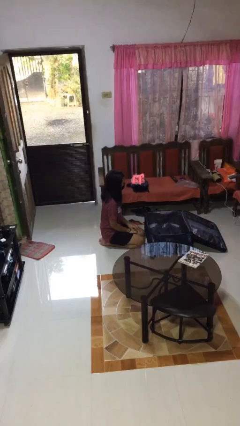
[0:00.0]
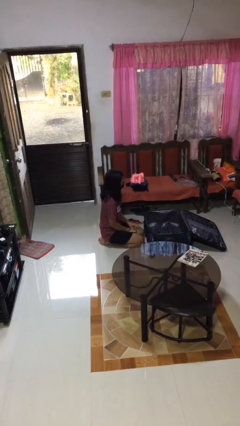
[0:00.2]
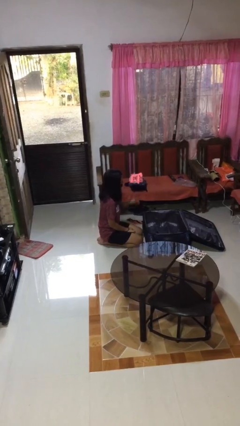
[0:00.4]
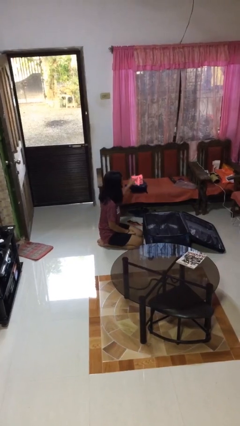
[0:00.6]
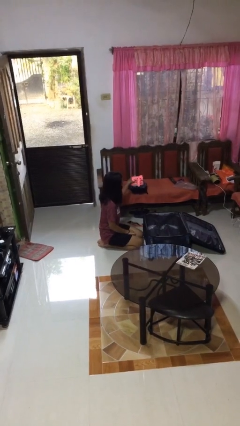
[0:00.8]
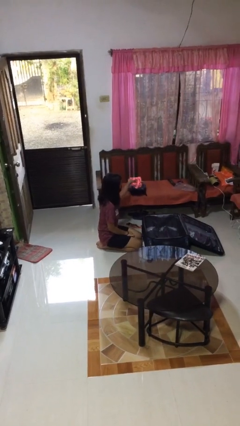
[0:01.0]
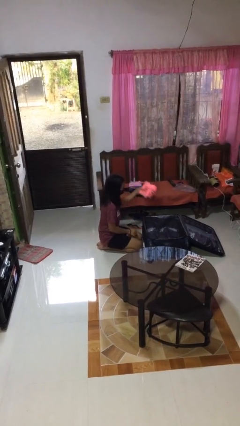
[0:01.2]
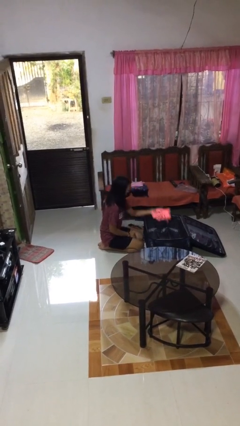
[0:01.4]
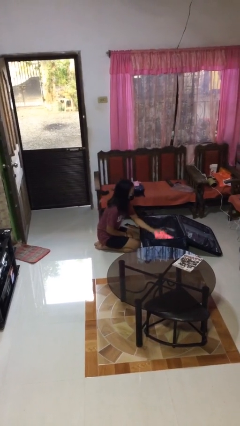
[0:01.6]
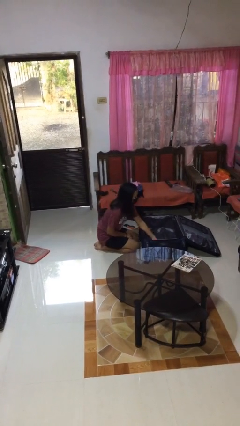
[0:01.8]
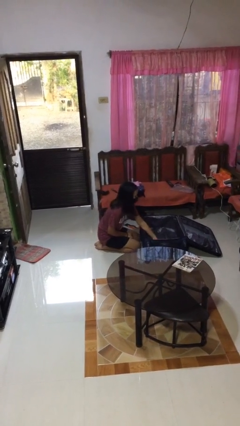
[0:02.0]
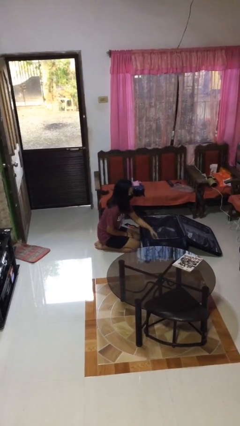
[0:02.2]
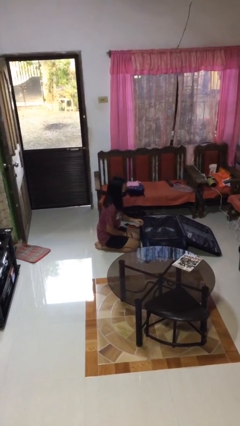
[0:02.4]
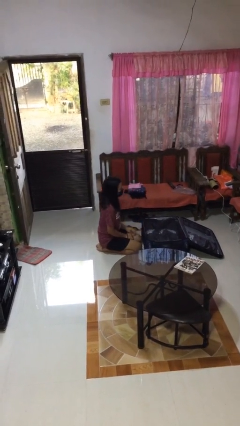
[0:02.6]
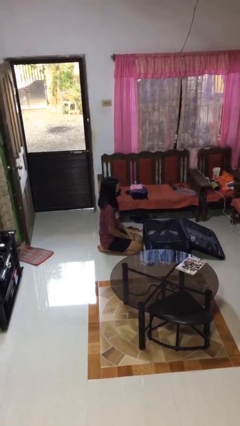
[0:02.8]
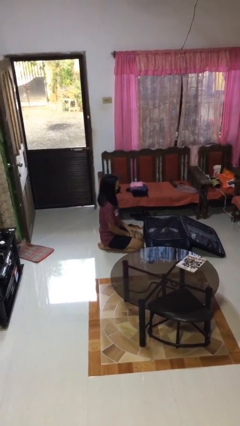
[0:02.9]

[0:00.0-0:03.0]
person loads clothes into suitcase

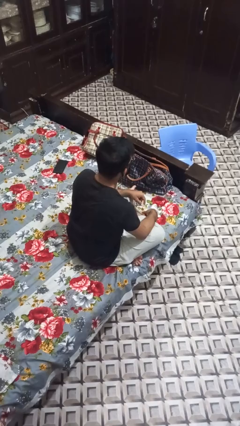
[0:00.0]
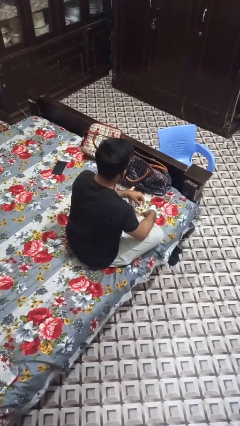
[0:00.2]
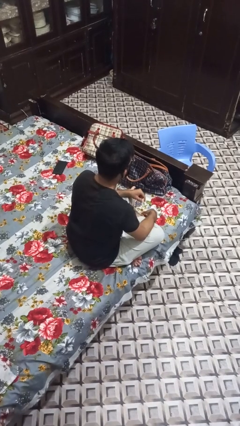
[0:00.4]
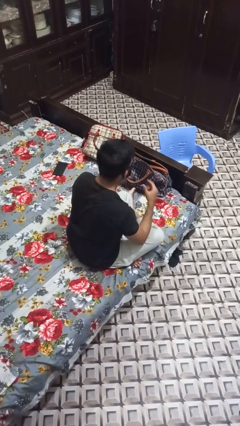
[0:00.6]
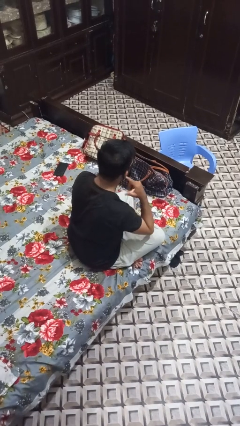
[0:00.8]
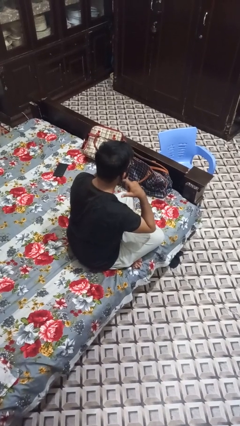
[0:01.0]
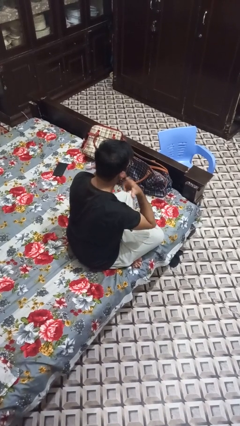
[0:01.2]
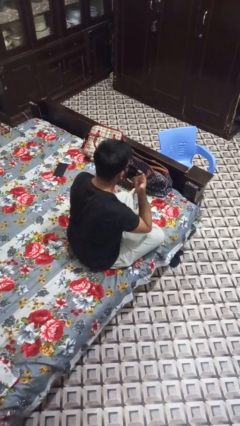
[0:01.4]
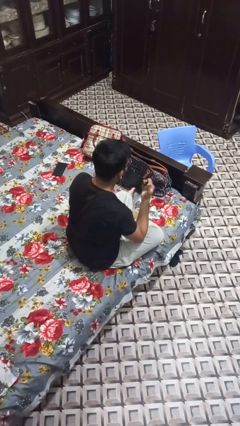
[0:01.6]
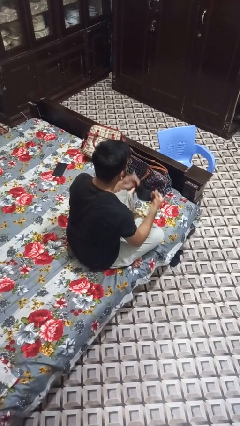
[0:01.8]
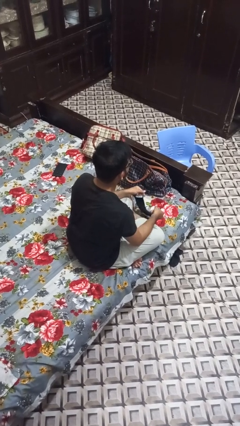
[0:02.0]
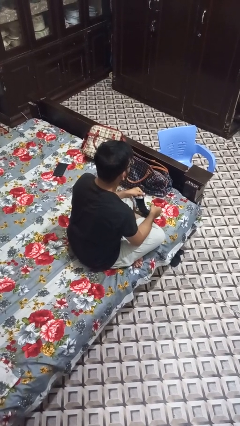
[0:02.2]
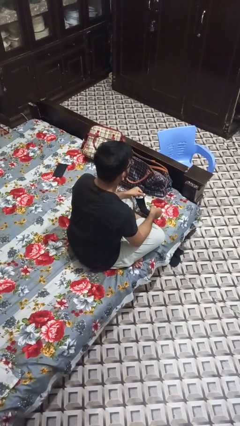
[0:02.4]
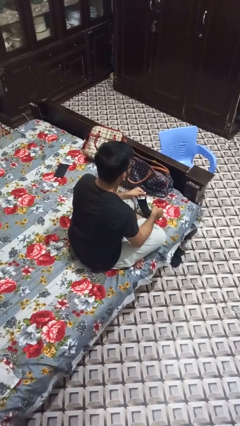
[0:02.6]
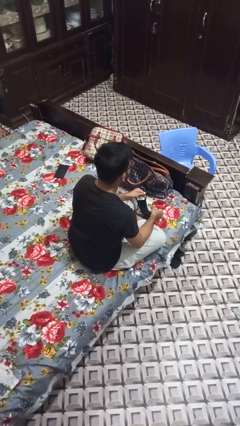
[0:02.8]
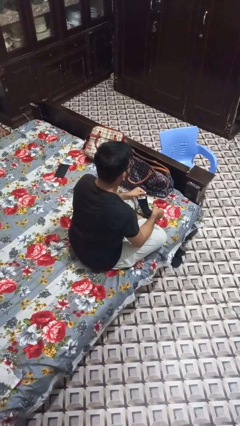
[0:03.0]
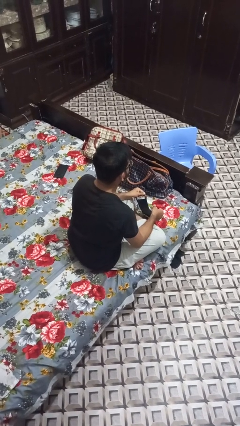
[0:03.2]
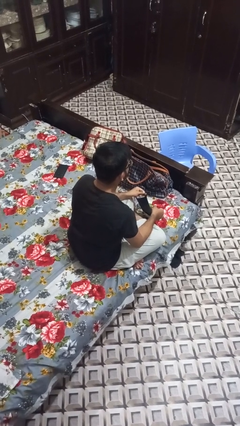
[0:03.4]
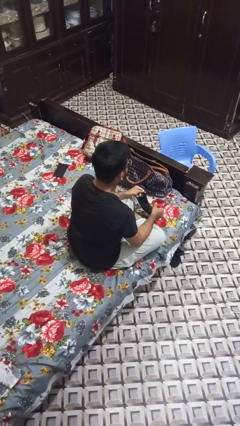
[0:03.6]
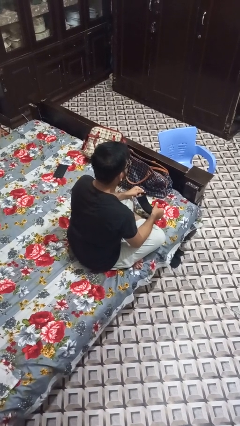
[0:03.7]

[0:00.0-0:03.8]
person takes off facemask

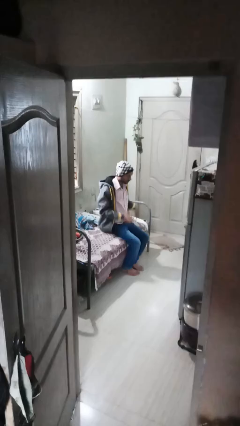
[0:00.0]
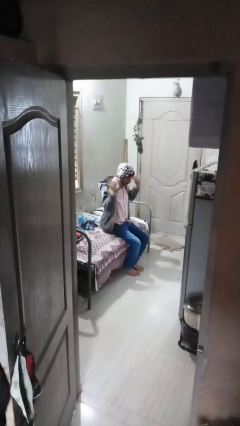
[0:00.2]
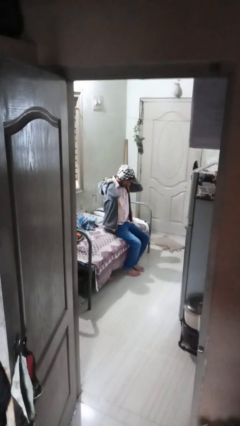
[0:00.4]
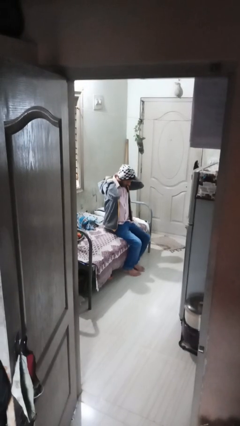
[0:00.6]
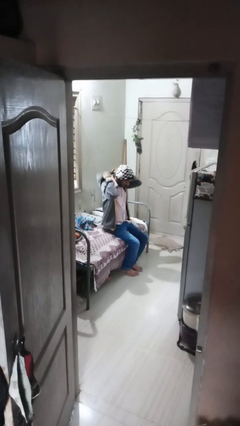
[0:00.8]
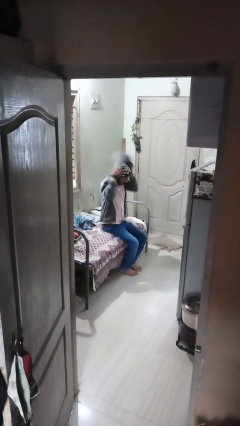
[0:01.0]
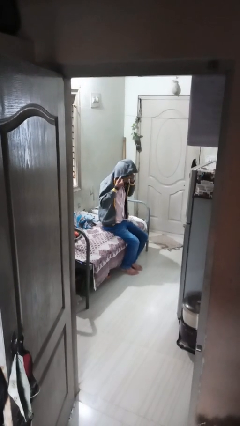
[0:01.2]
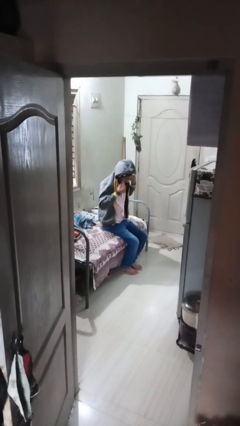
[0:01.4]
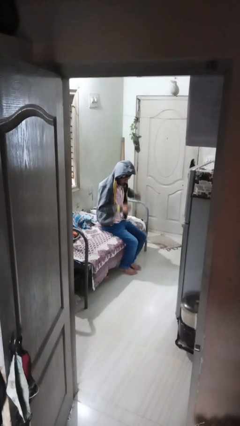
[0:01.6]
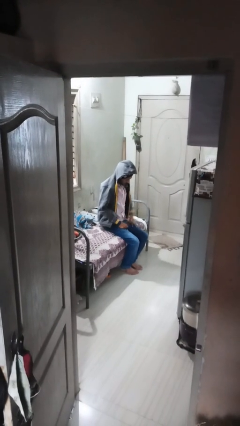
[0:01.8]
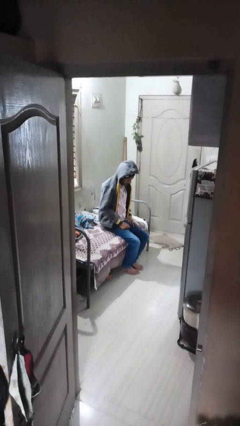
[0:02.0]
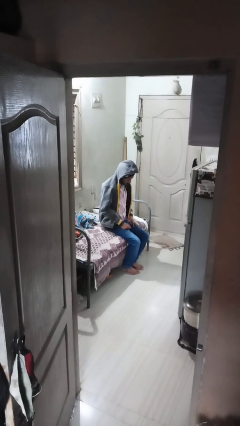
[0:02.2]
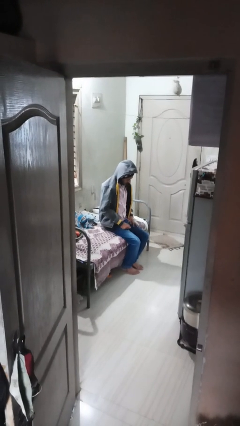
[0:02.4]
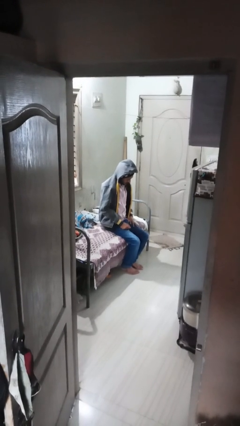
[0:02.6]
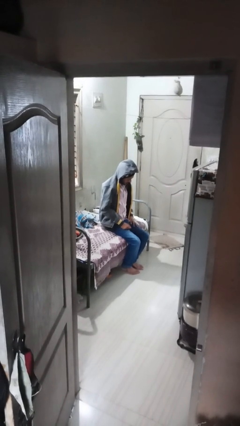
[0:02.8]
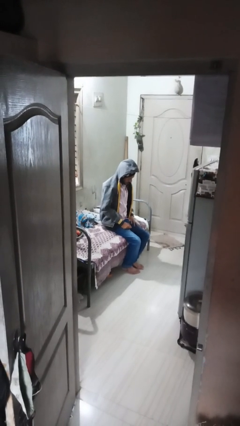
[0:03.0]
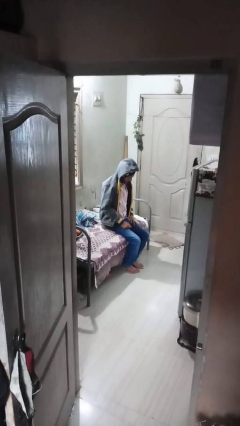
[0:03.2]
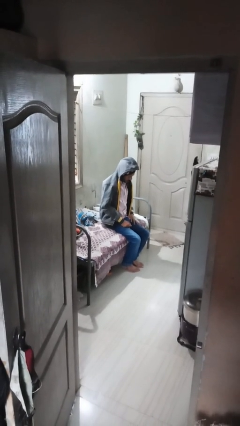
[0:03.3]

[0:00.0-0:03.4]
person puts on hoodie

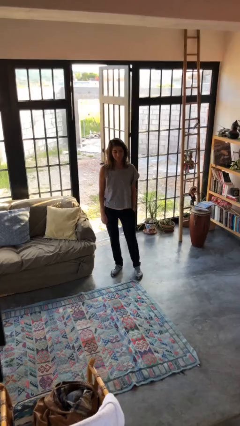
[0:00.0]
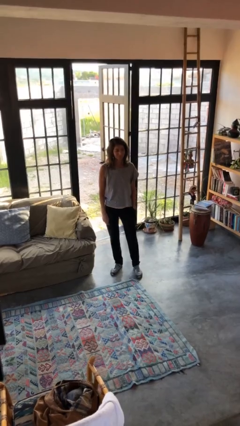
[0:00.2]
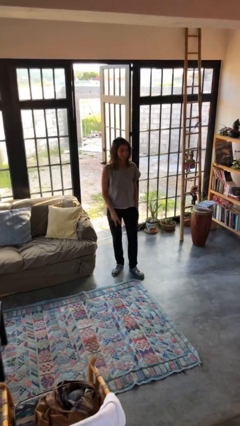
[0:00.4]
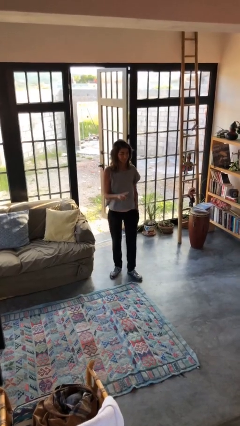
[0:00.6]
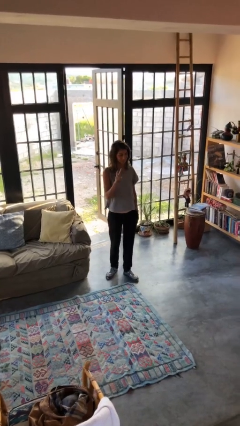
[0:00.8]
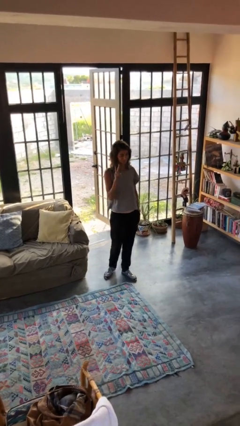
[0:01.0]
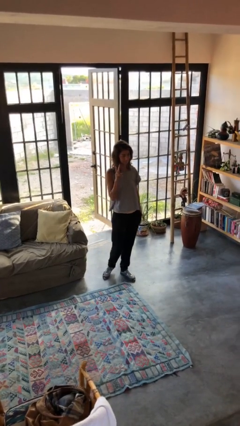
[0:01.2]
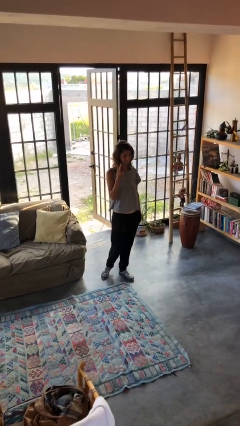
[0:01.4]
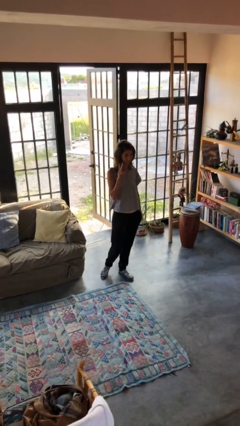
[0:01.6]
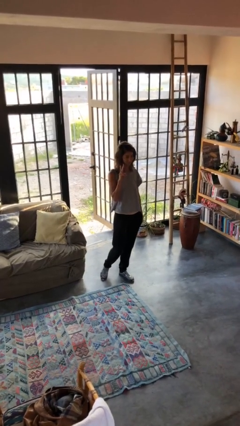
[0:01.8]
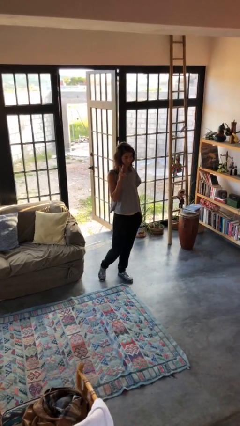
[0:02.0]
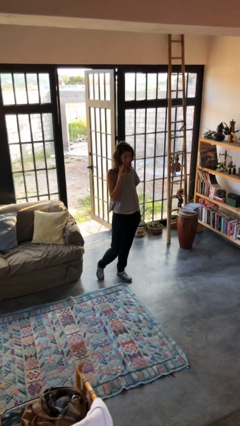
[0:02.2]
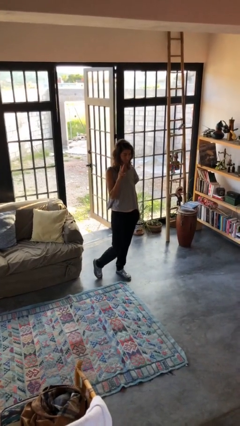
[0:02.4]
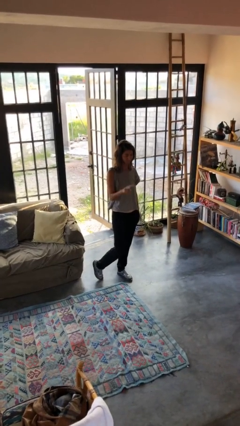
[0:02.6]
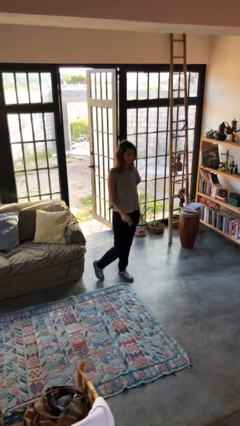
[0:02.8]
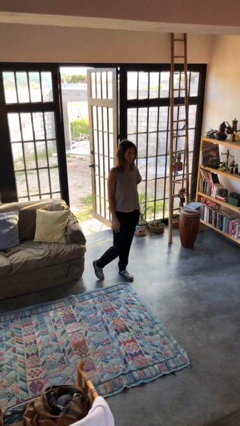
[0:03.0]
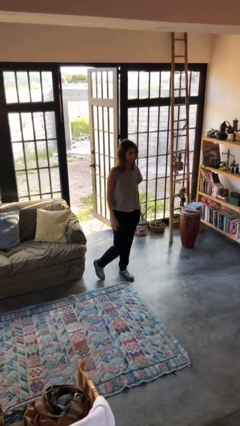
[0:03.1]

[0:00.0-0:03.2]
person gestures peace

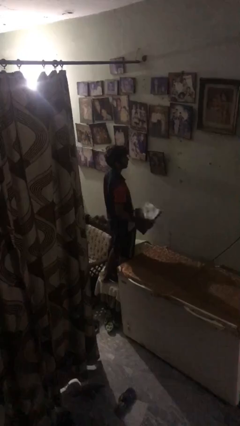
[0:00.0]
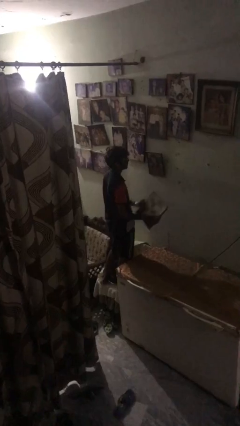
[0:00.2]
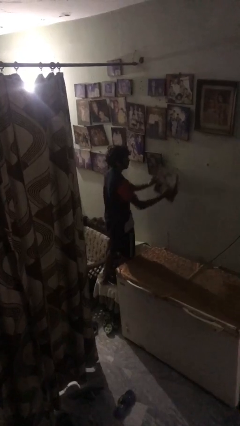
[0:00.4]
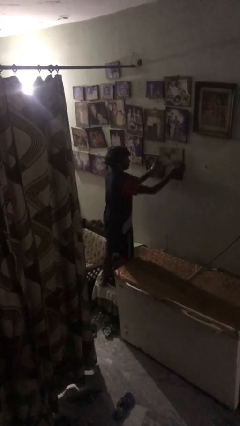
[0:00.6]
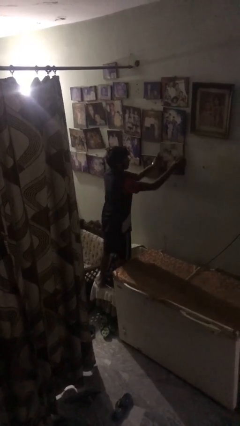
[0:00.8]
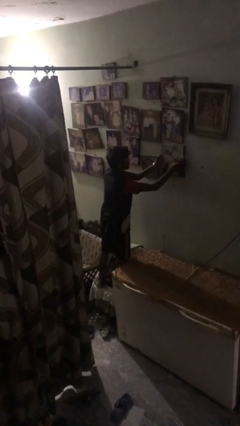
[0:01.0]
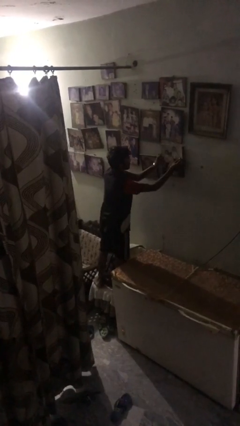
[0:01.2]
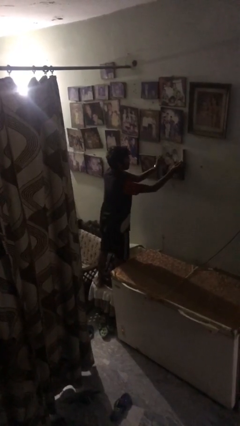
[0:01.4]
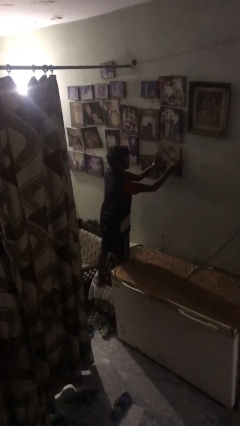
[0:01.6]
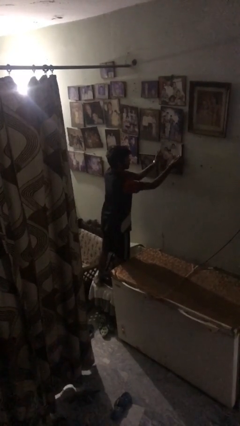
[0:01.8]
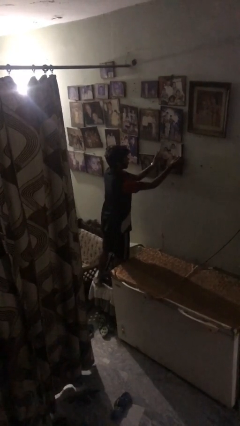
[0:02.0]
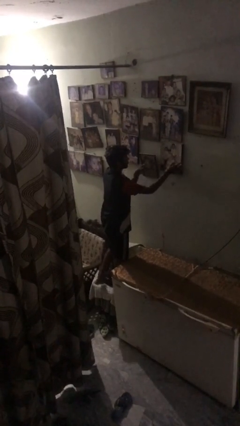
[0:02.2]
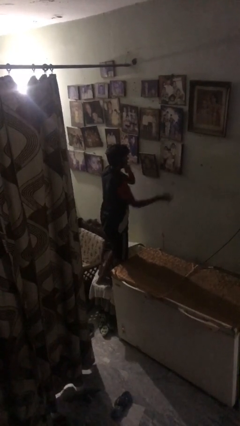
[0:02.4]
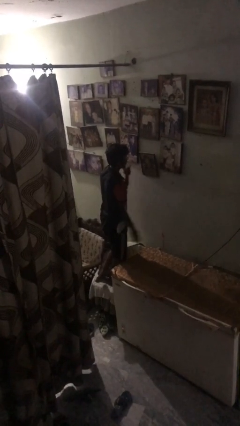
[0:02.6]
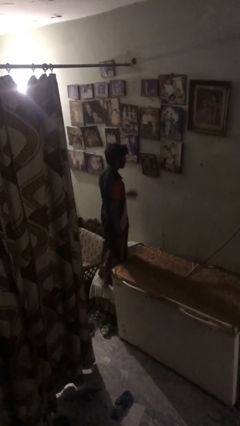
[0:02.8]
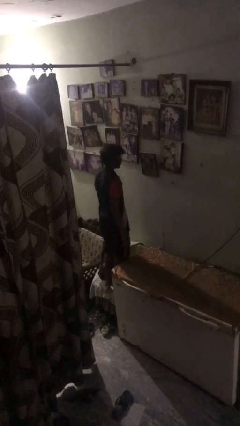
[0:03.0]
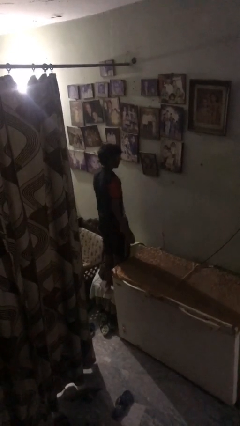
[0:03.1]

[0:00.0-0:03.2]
person puts up picture frame

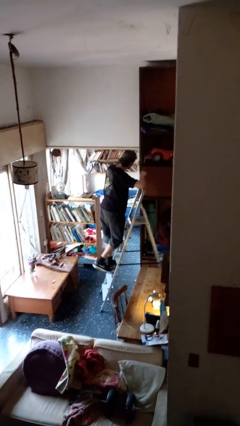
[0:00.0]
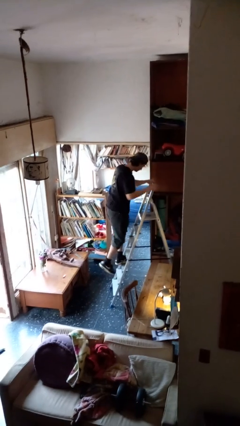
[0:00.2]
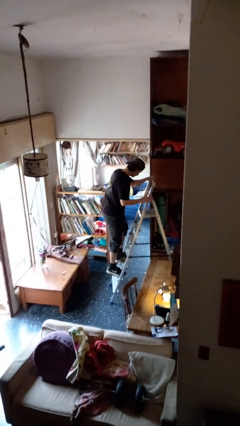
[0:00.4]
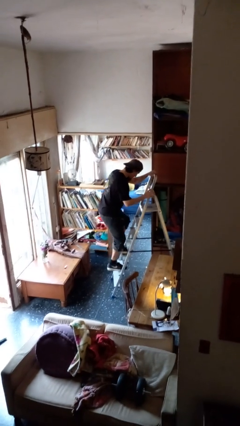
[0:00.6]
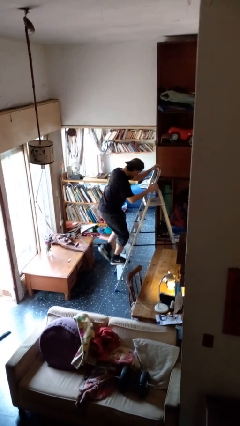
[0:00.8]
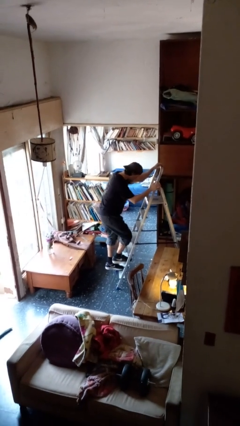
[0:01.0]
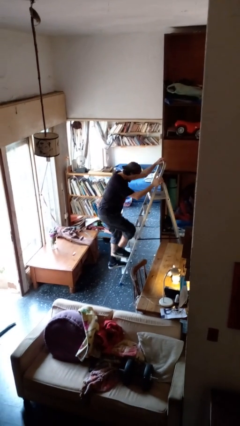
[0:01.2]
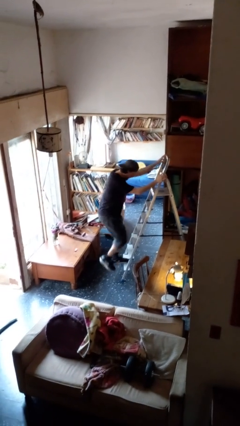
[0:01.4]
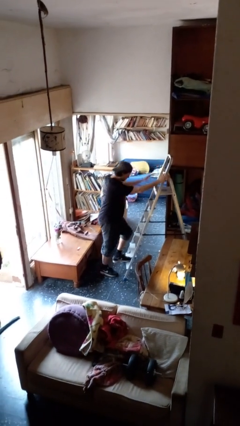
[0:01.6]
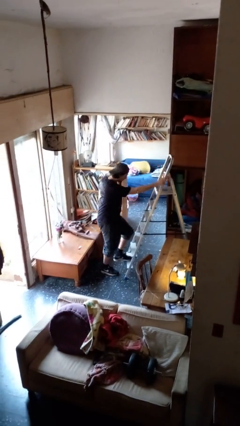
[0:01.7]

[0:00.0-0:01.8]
person climbs down ladder
